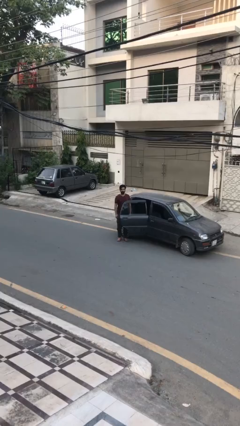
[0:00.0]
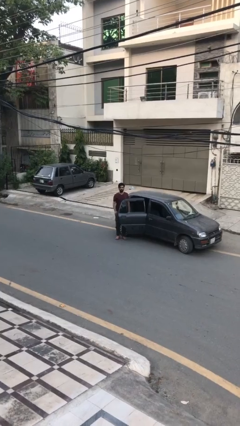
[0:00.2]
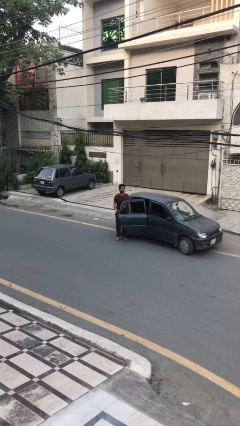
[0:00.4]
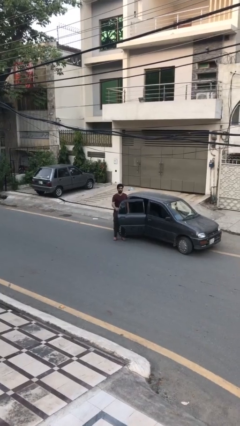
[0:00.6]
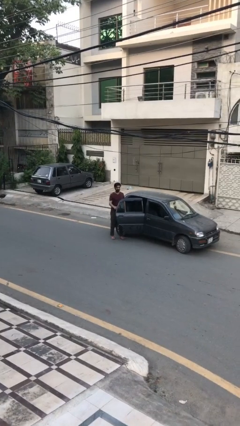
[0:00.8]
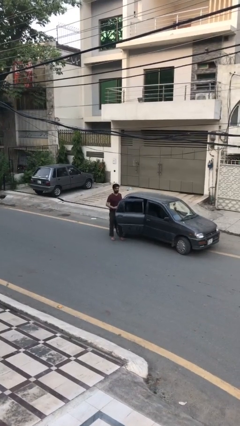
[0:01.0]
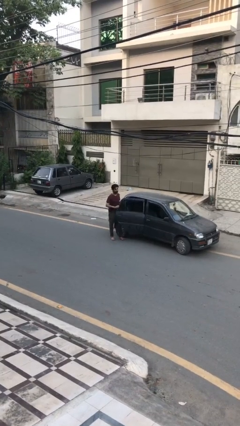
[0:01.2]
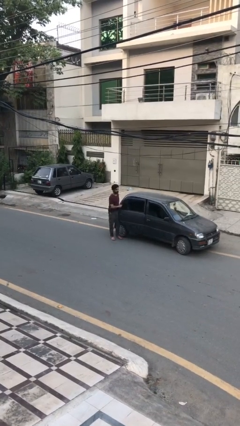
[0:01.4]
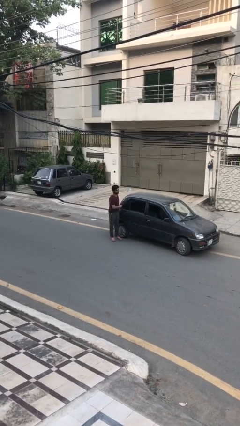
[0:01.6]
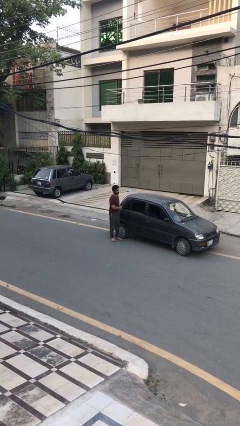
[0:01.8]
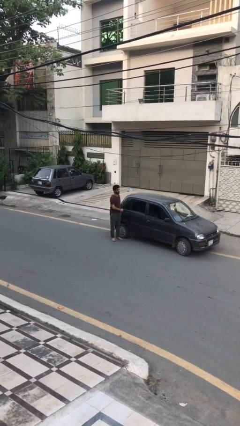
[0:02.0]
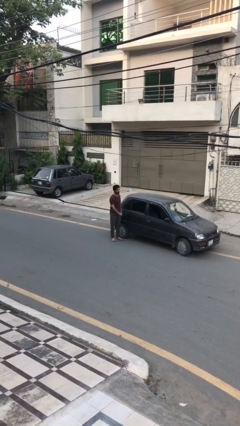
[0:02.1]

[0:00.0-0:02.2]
person closes car door

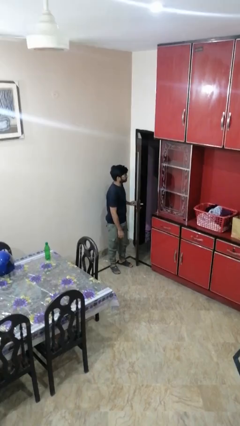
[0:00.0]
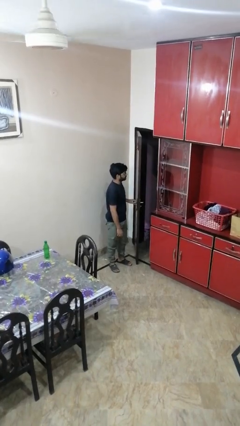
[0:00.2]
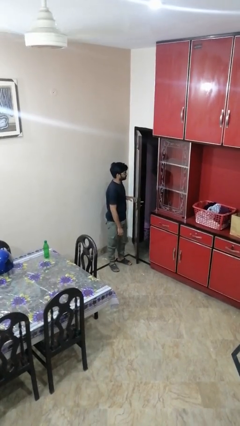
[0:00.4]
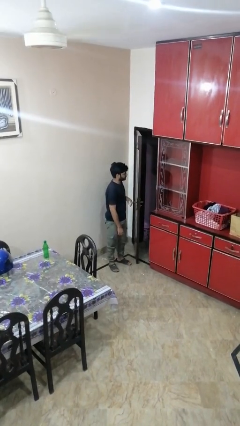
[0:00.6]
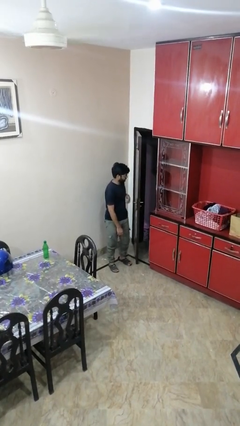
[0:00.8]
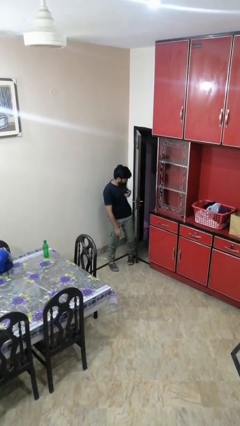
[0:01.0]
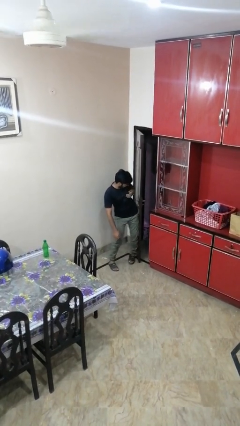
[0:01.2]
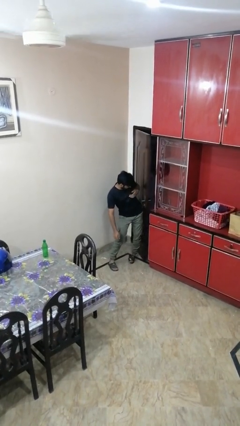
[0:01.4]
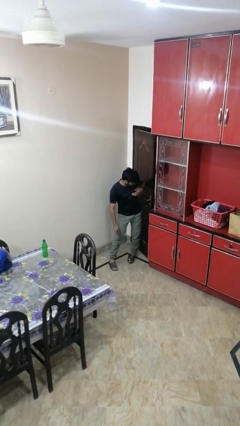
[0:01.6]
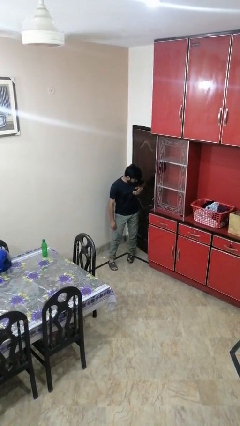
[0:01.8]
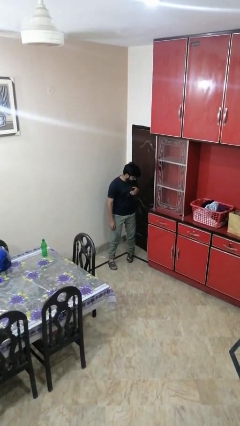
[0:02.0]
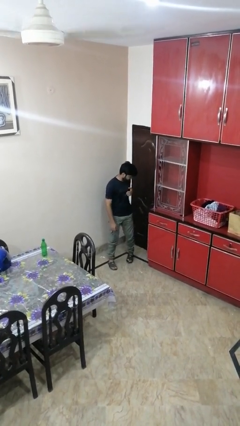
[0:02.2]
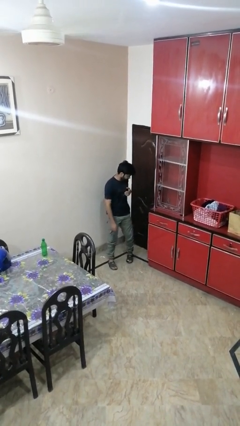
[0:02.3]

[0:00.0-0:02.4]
person closes door with hip

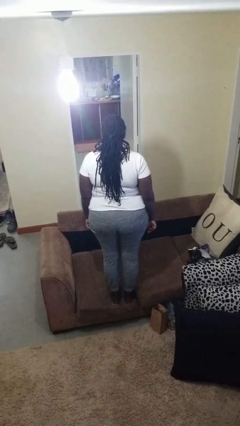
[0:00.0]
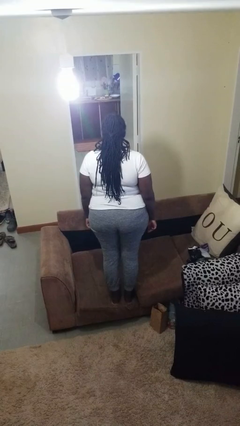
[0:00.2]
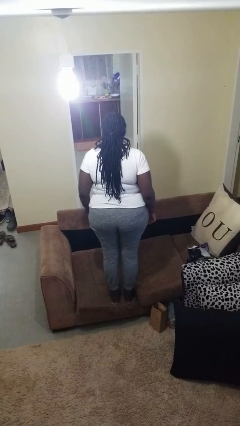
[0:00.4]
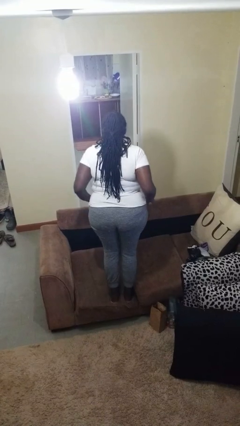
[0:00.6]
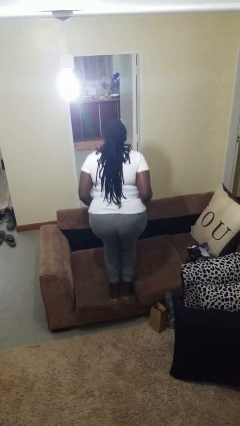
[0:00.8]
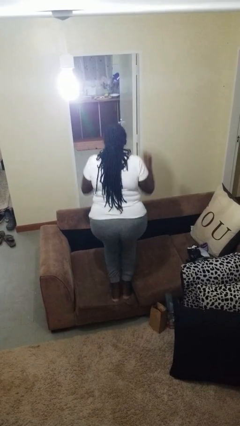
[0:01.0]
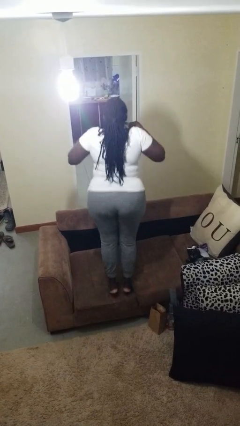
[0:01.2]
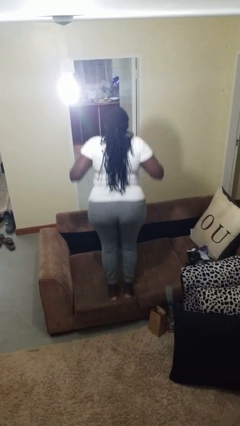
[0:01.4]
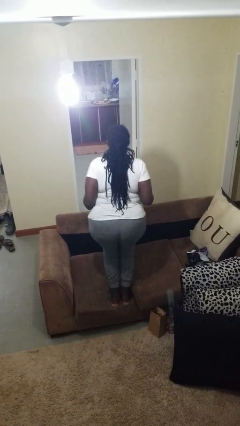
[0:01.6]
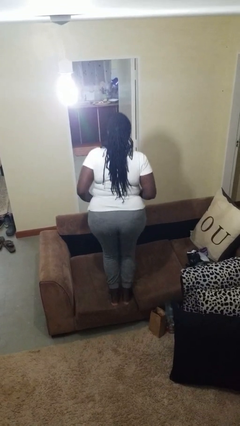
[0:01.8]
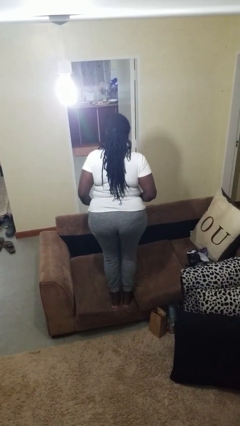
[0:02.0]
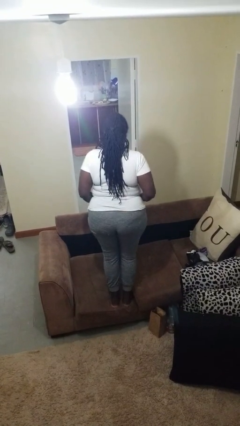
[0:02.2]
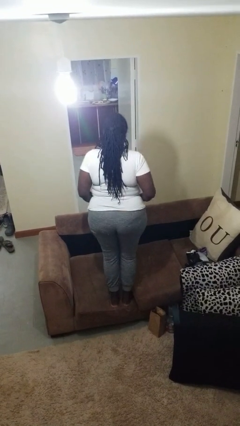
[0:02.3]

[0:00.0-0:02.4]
person jumps on couch

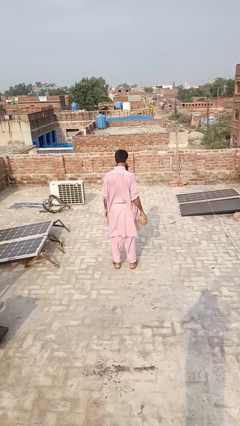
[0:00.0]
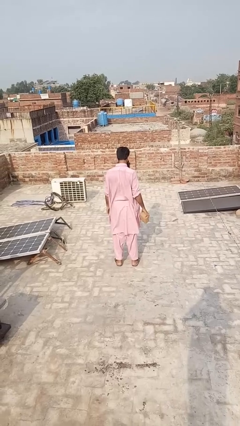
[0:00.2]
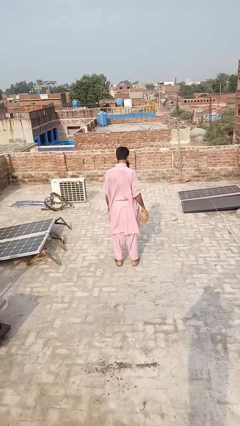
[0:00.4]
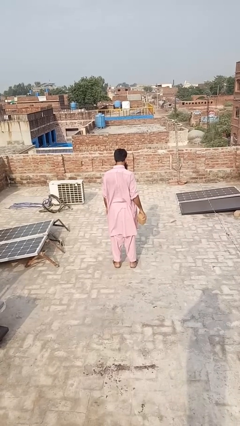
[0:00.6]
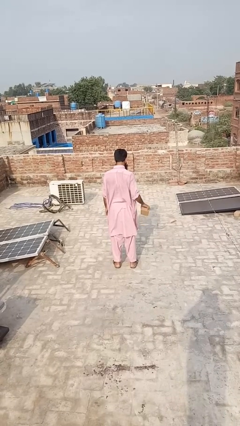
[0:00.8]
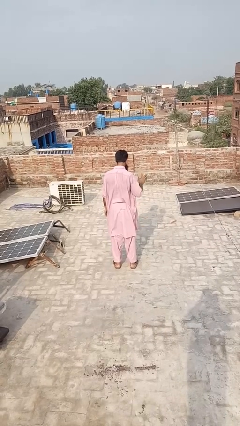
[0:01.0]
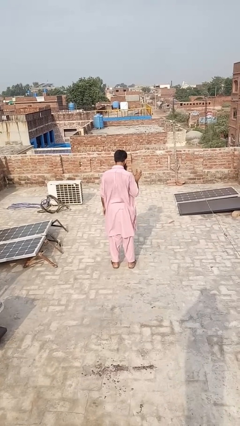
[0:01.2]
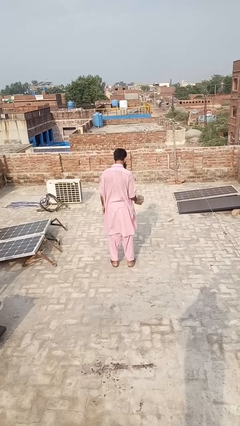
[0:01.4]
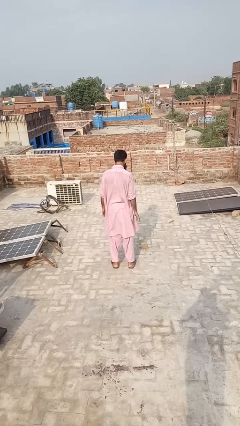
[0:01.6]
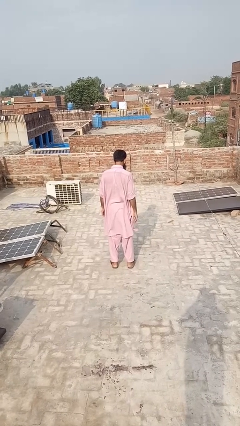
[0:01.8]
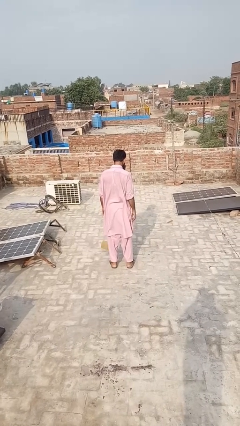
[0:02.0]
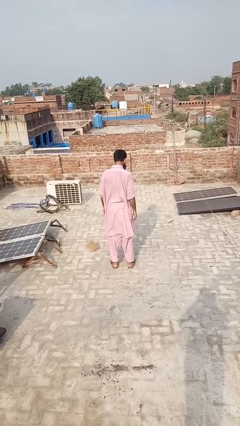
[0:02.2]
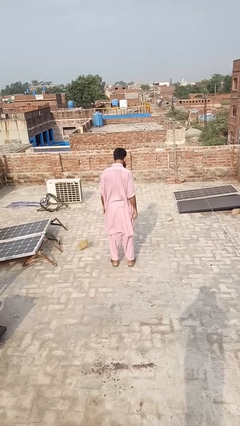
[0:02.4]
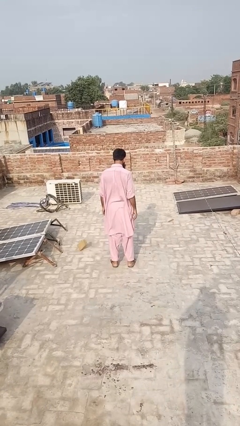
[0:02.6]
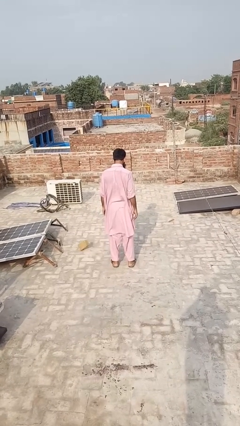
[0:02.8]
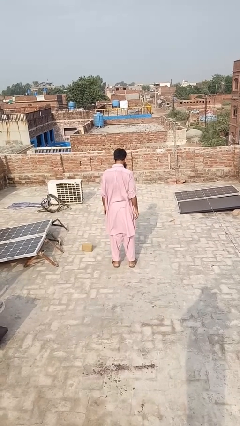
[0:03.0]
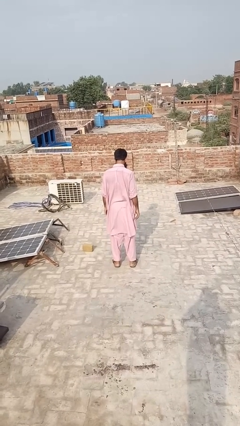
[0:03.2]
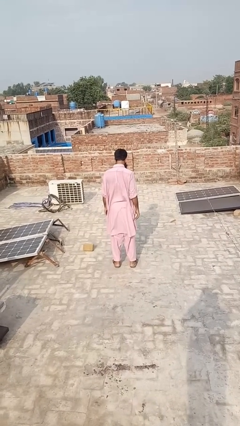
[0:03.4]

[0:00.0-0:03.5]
person throws object to ground

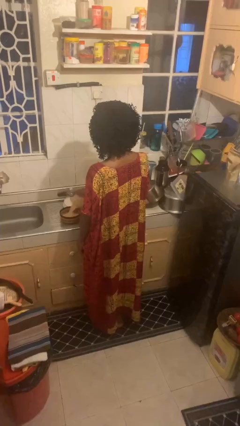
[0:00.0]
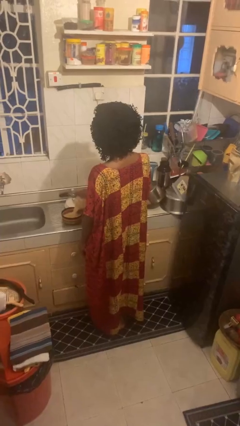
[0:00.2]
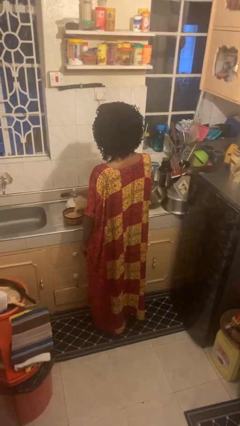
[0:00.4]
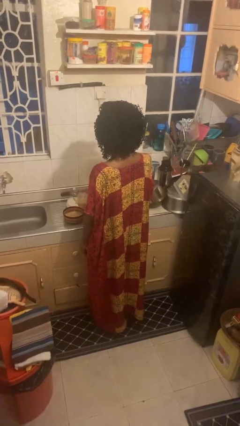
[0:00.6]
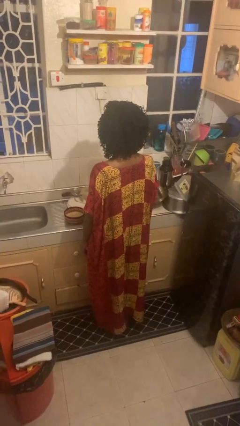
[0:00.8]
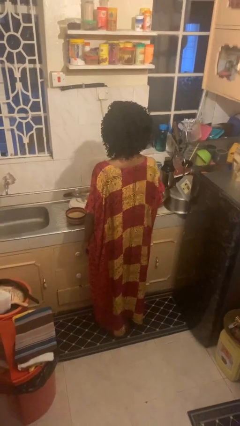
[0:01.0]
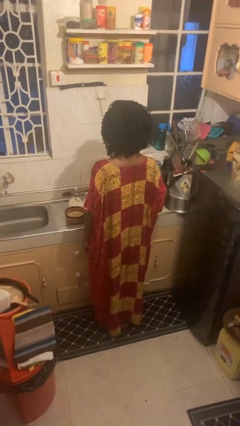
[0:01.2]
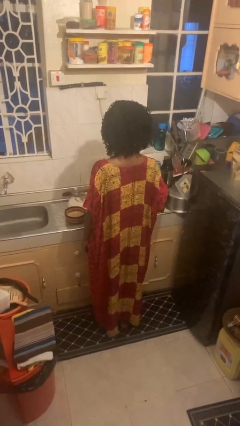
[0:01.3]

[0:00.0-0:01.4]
person pours into bowl

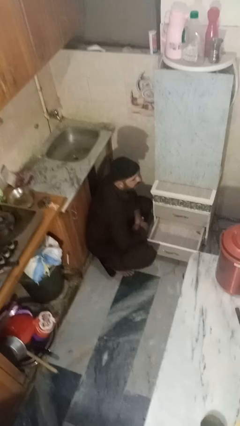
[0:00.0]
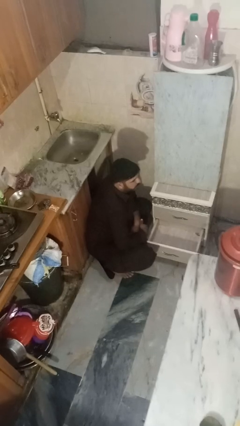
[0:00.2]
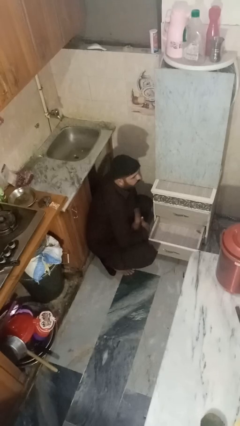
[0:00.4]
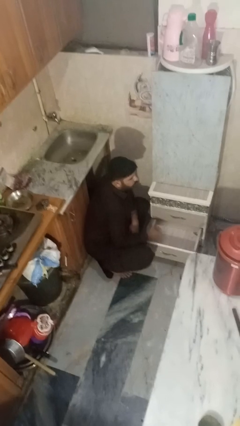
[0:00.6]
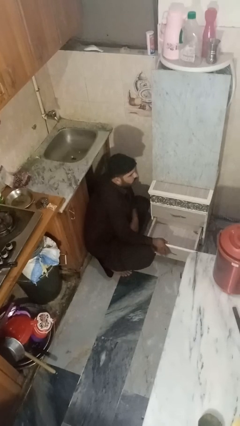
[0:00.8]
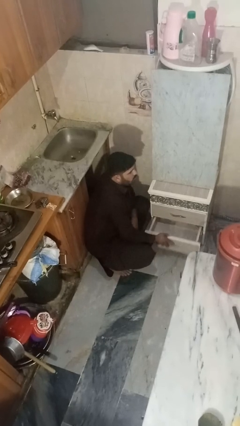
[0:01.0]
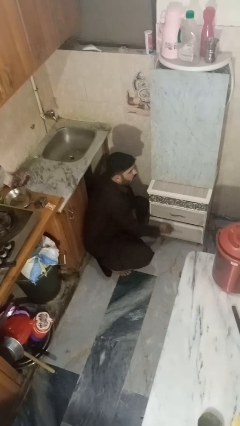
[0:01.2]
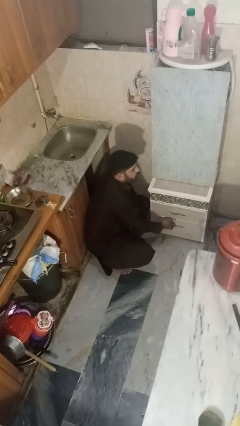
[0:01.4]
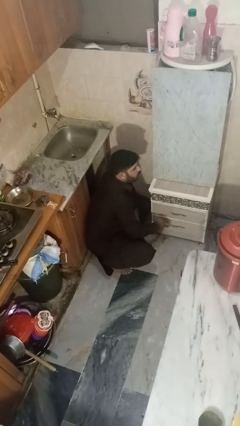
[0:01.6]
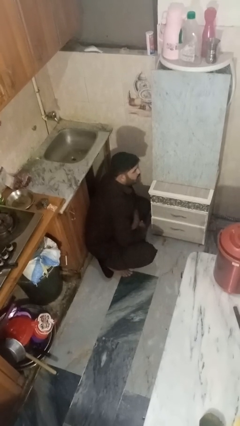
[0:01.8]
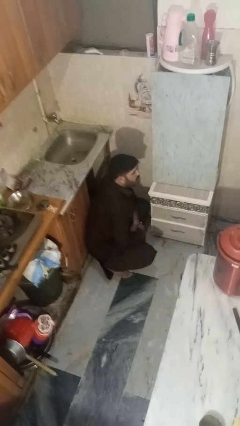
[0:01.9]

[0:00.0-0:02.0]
person closes kitchen drawer

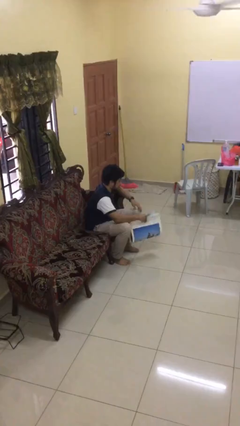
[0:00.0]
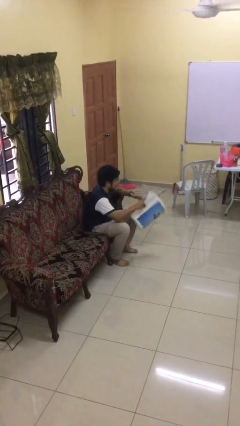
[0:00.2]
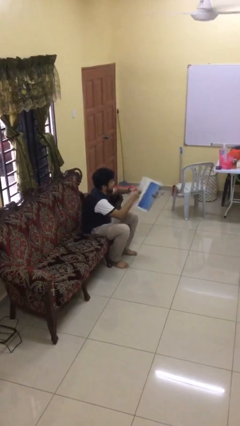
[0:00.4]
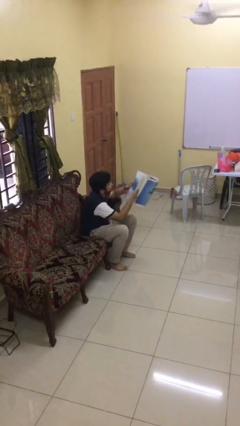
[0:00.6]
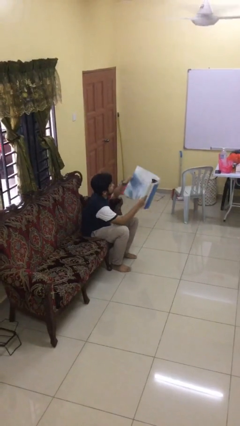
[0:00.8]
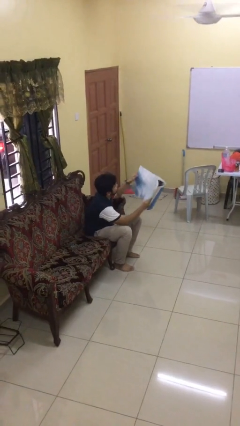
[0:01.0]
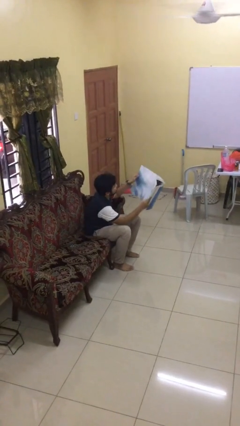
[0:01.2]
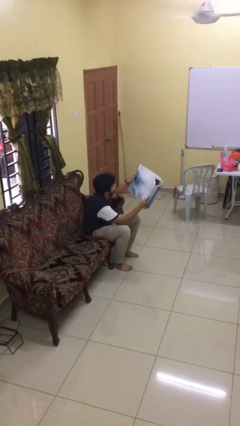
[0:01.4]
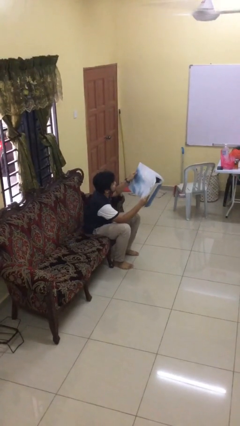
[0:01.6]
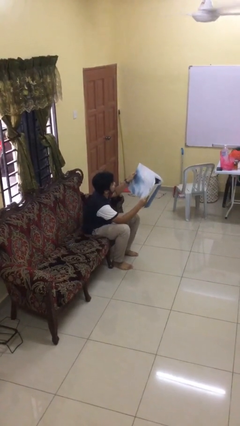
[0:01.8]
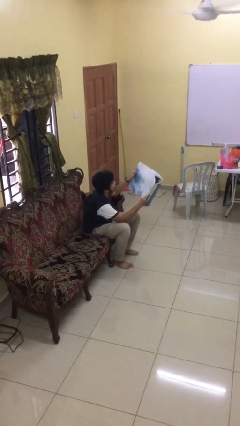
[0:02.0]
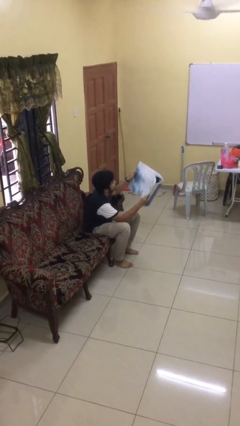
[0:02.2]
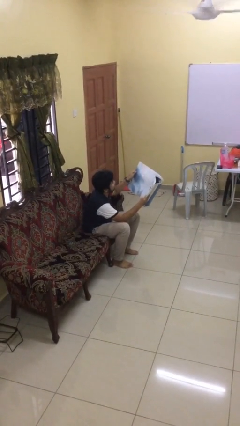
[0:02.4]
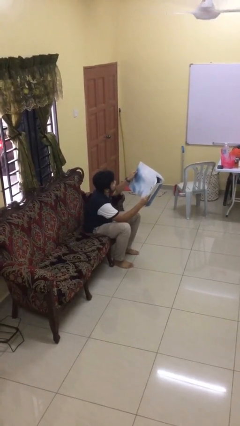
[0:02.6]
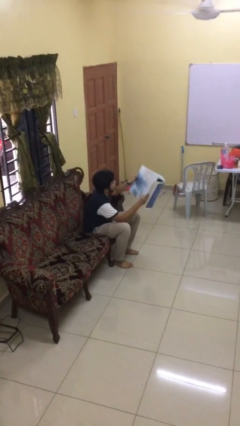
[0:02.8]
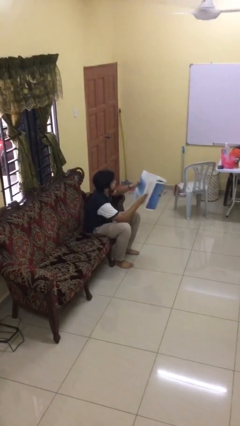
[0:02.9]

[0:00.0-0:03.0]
person reads newspaper

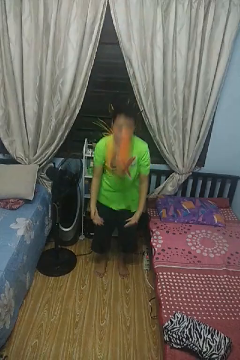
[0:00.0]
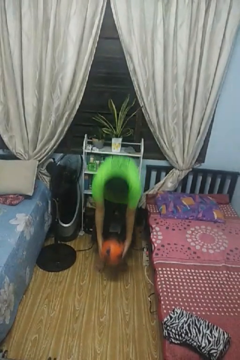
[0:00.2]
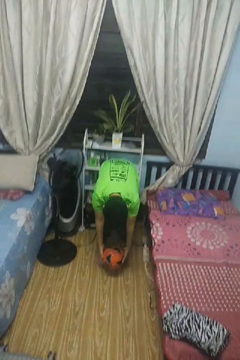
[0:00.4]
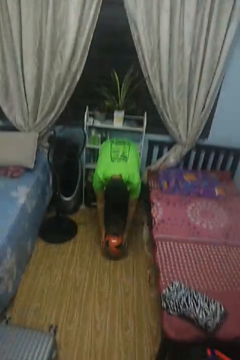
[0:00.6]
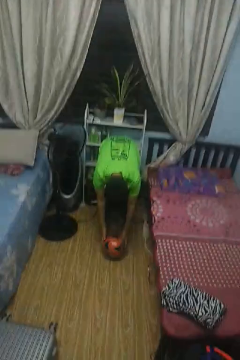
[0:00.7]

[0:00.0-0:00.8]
person catches dropped object
